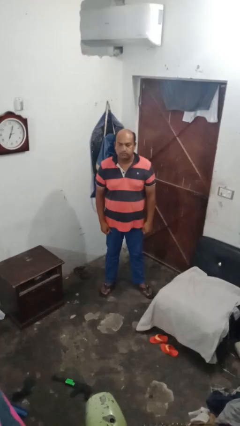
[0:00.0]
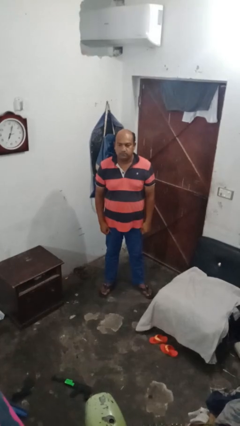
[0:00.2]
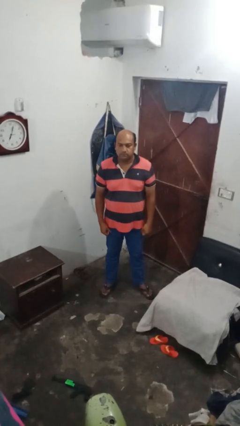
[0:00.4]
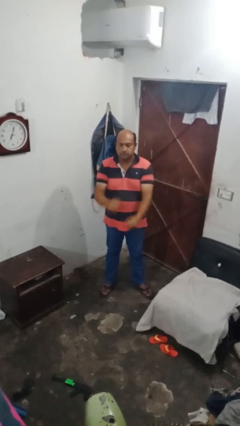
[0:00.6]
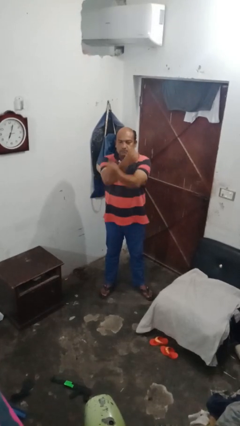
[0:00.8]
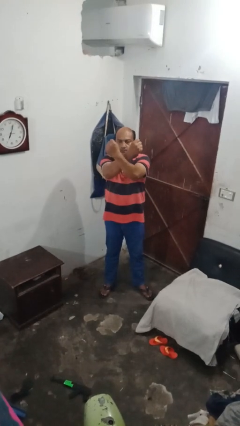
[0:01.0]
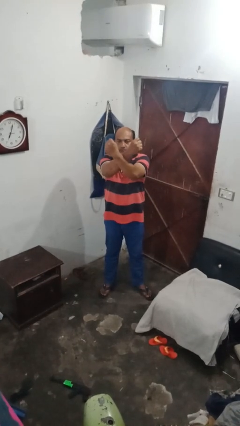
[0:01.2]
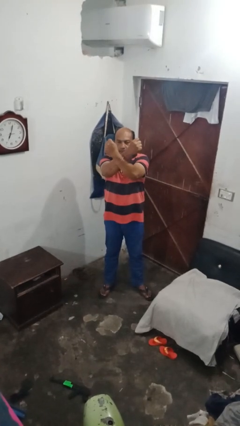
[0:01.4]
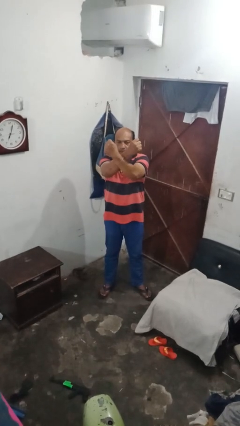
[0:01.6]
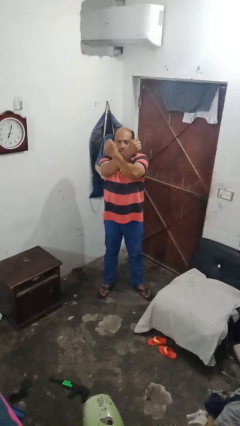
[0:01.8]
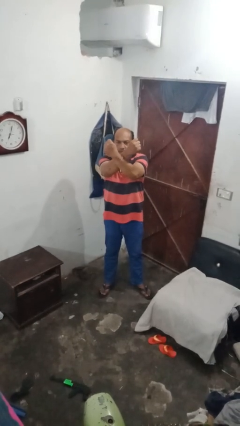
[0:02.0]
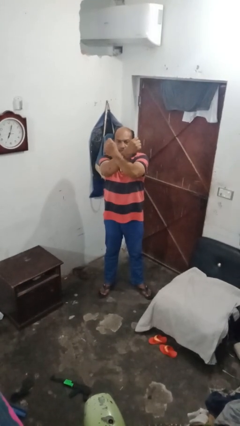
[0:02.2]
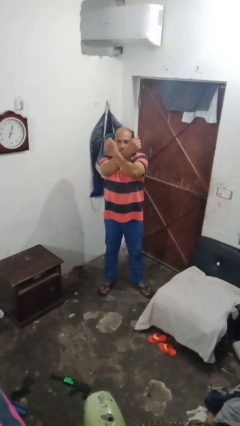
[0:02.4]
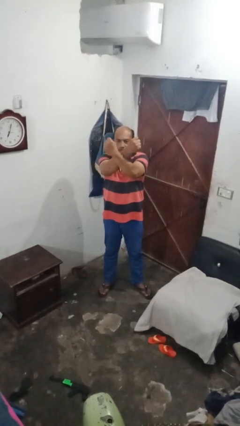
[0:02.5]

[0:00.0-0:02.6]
person gestures arms x

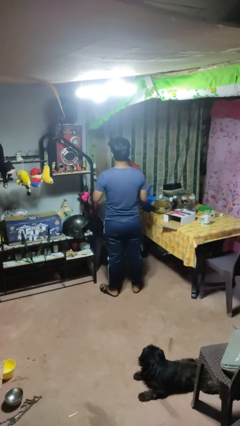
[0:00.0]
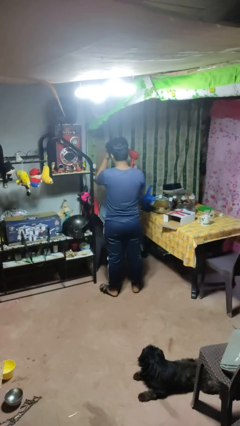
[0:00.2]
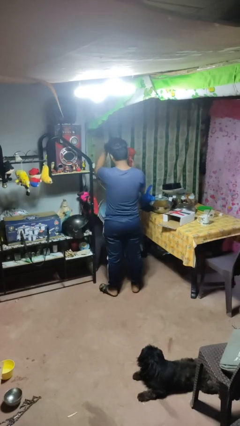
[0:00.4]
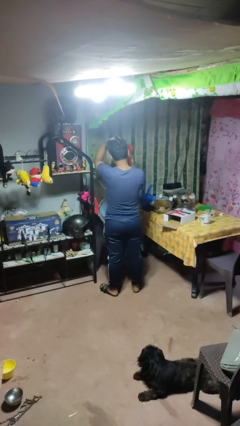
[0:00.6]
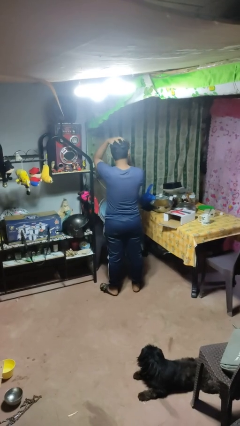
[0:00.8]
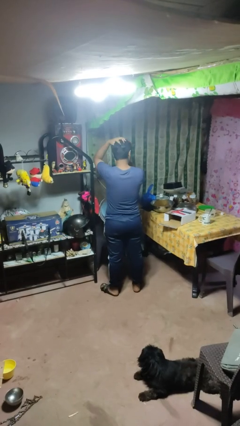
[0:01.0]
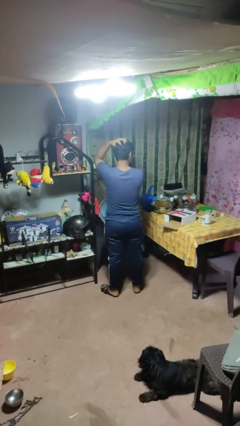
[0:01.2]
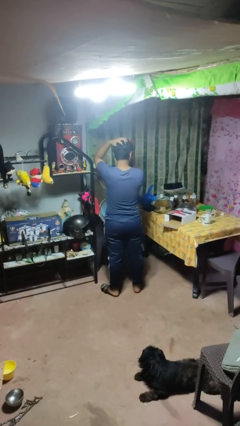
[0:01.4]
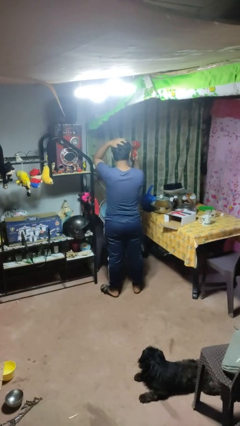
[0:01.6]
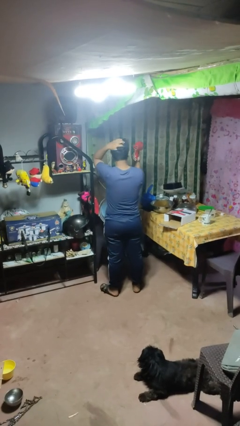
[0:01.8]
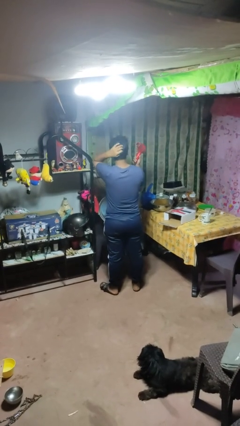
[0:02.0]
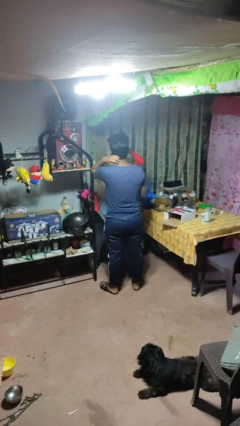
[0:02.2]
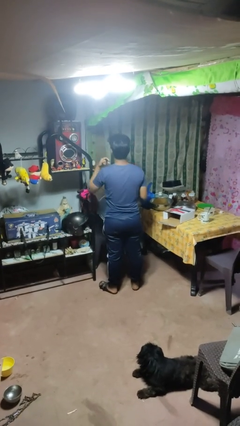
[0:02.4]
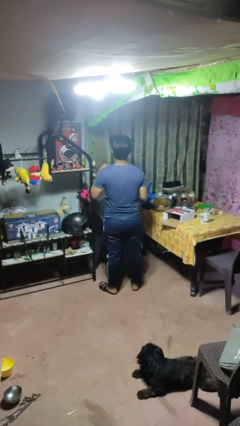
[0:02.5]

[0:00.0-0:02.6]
person dries hair with hairdryer

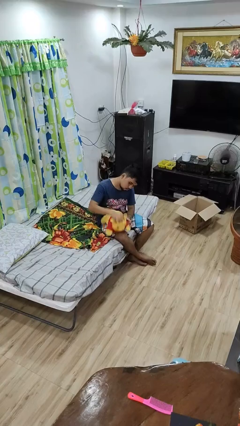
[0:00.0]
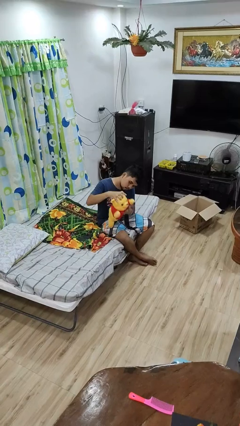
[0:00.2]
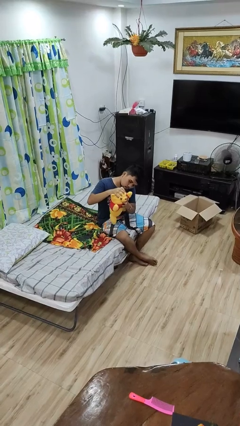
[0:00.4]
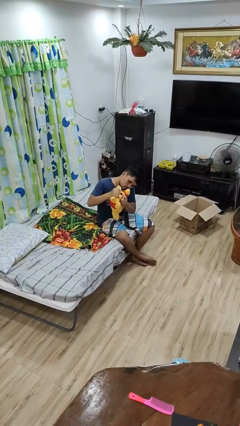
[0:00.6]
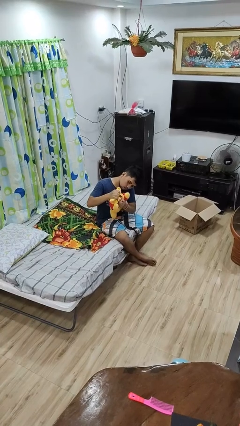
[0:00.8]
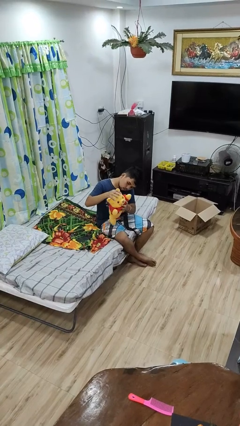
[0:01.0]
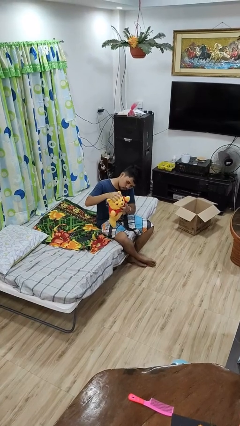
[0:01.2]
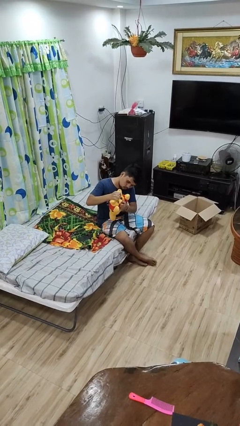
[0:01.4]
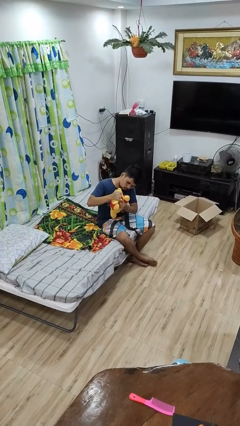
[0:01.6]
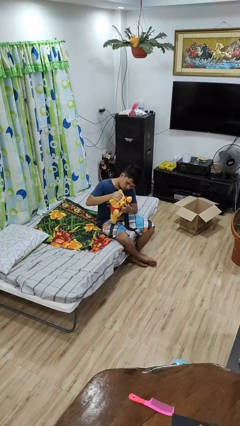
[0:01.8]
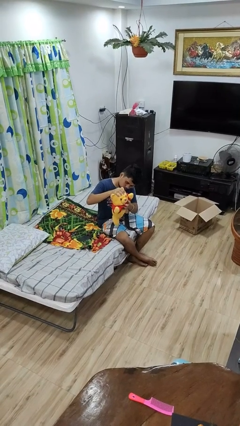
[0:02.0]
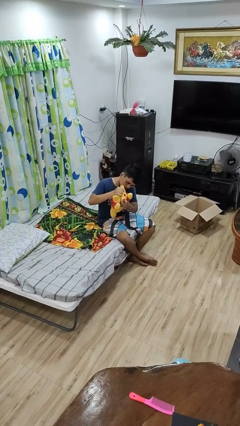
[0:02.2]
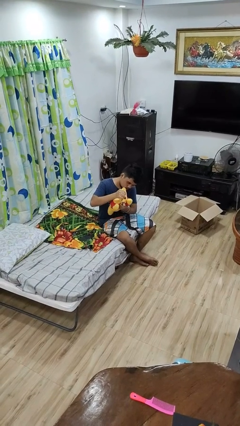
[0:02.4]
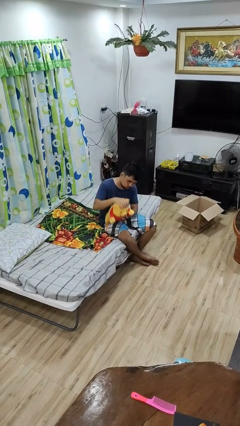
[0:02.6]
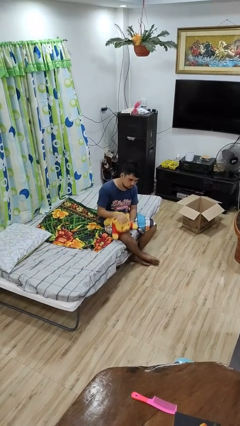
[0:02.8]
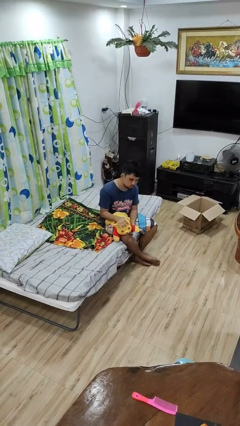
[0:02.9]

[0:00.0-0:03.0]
person squeezes object

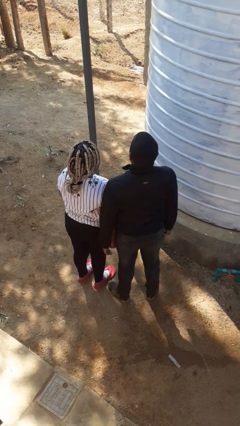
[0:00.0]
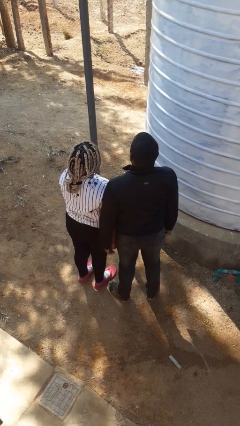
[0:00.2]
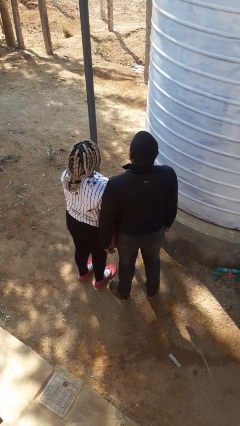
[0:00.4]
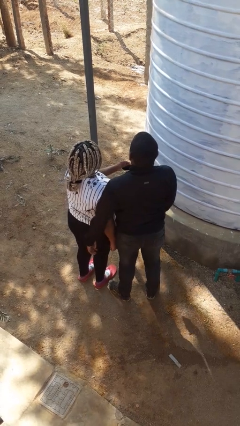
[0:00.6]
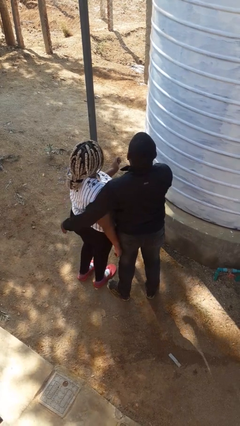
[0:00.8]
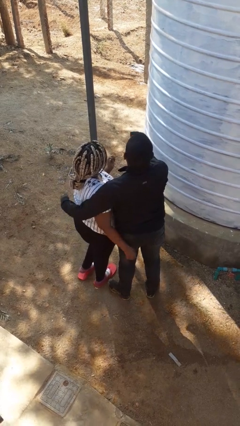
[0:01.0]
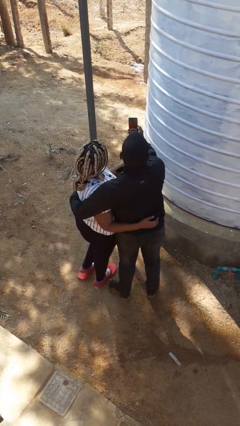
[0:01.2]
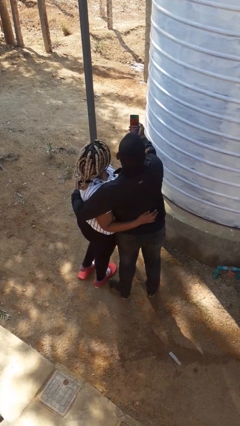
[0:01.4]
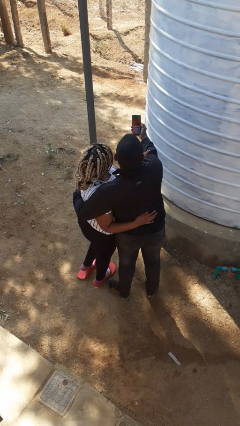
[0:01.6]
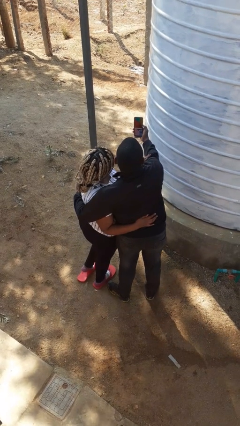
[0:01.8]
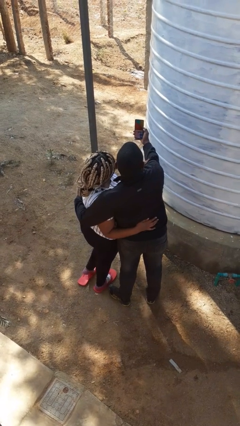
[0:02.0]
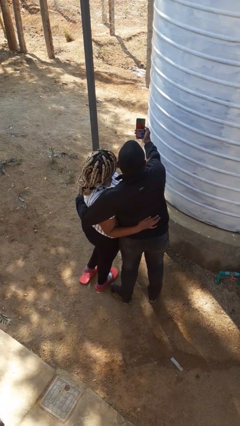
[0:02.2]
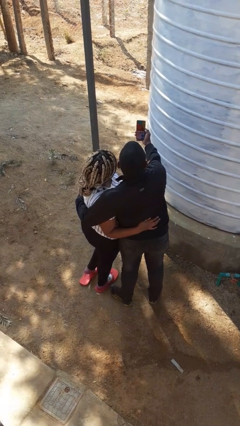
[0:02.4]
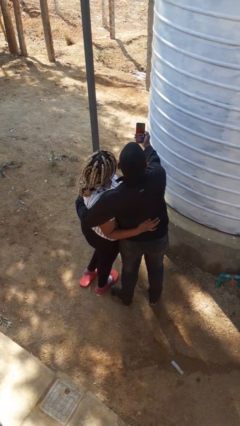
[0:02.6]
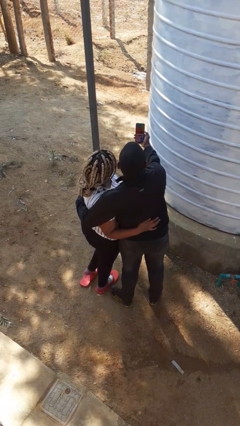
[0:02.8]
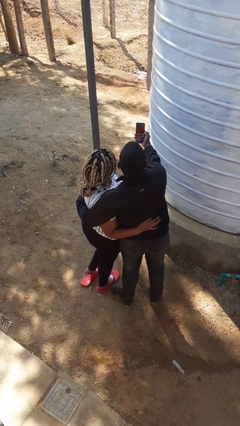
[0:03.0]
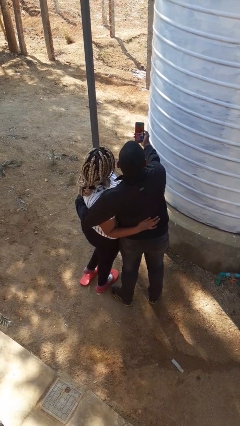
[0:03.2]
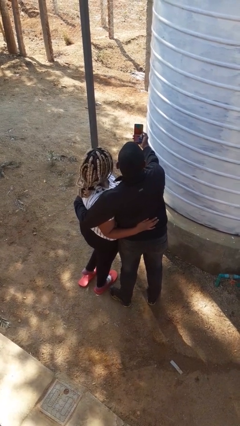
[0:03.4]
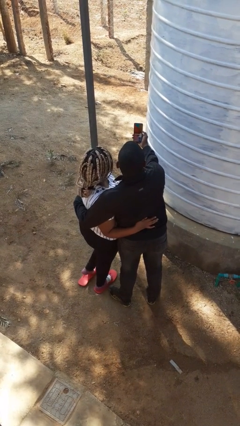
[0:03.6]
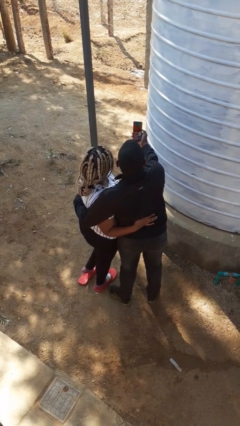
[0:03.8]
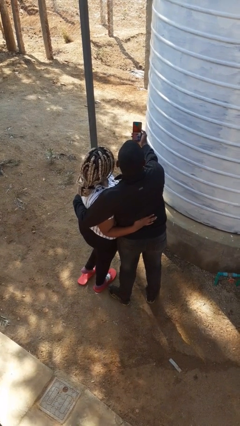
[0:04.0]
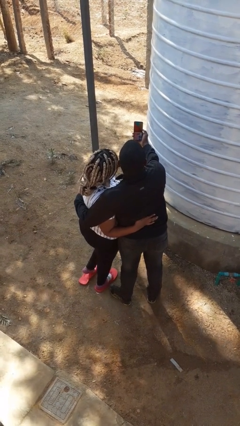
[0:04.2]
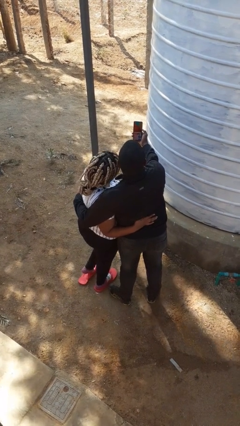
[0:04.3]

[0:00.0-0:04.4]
person takes selfie with person

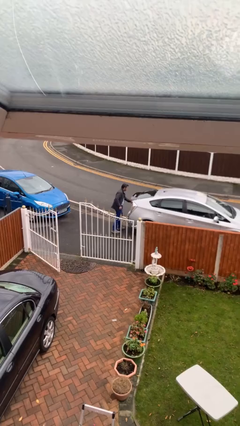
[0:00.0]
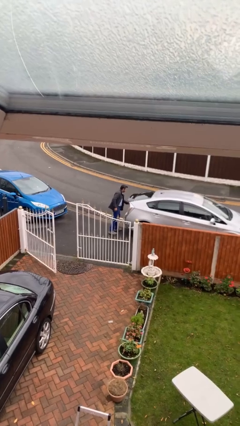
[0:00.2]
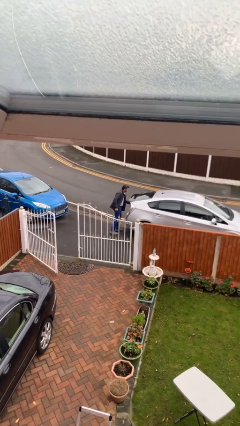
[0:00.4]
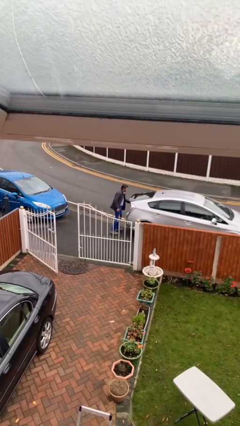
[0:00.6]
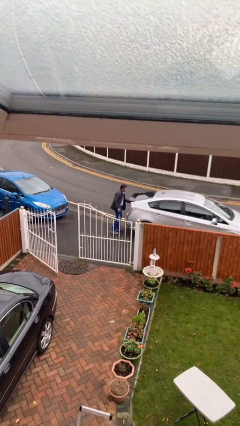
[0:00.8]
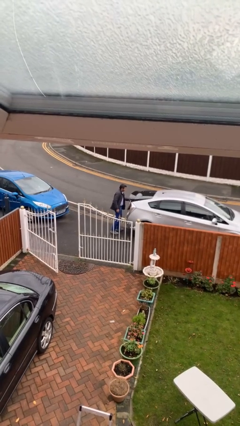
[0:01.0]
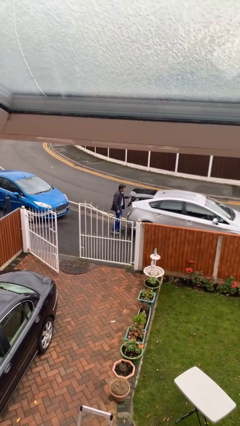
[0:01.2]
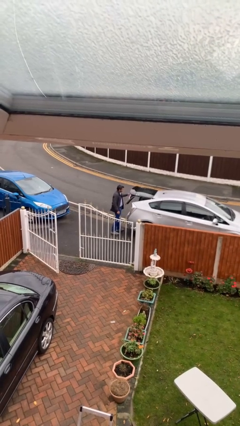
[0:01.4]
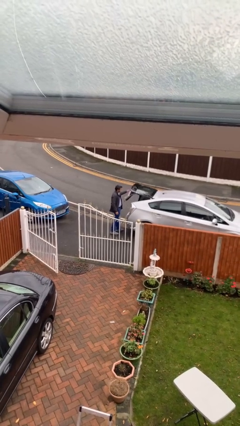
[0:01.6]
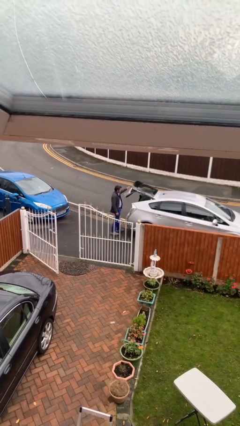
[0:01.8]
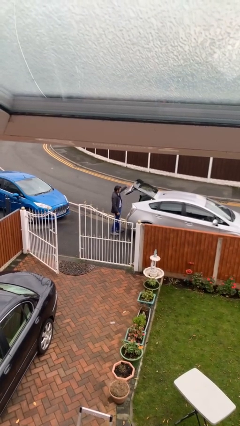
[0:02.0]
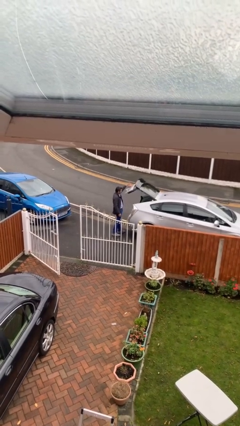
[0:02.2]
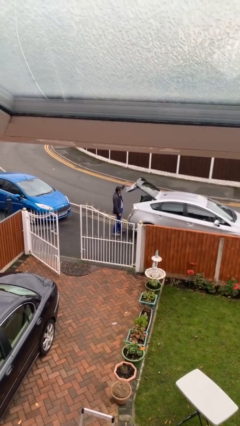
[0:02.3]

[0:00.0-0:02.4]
person opens car trunk

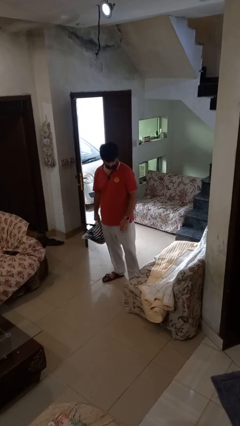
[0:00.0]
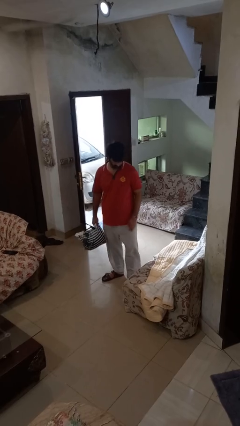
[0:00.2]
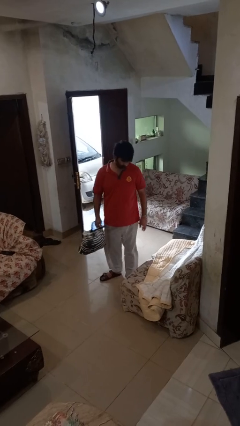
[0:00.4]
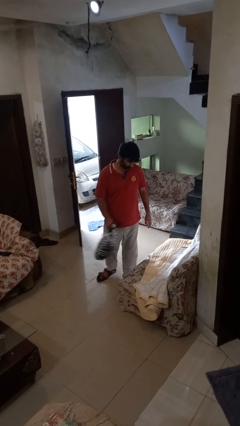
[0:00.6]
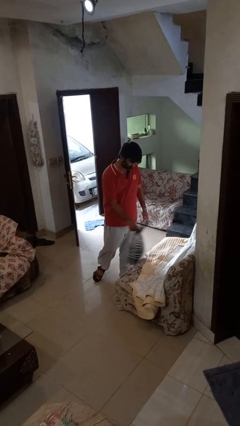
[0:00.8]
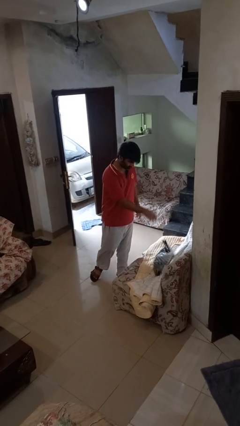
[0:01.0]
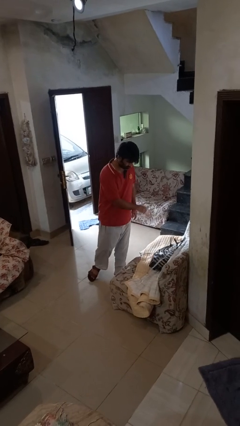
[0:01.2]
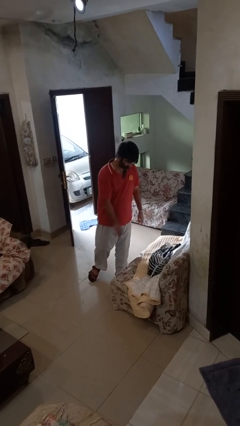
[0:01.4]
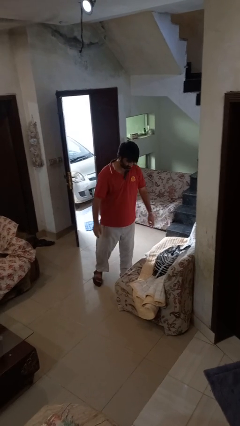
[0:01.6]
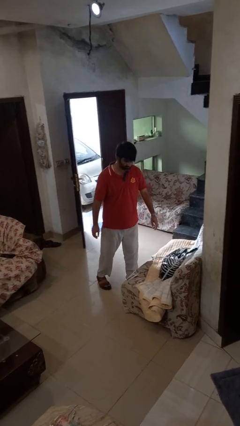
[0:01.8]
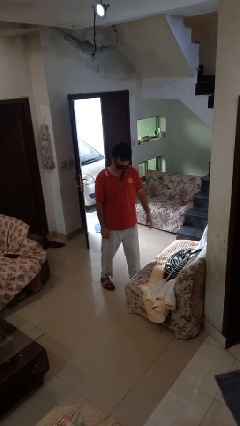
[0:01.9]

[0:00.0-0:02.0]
person puts down object on couch

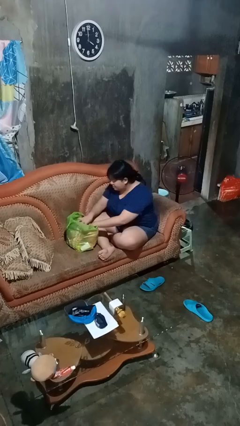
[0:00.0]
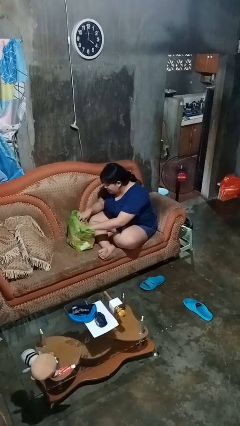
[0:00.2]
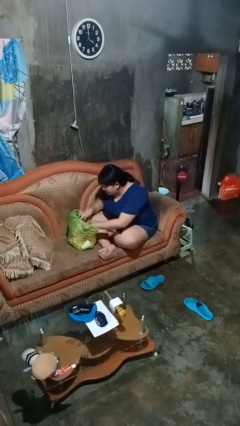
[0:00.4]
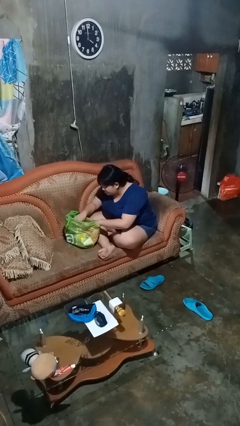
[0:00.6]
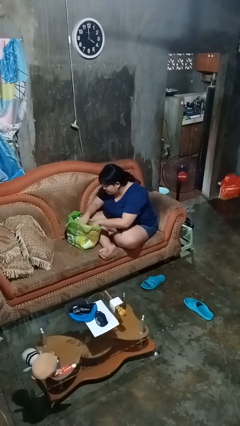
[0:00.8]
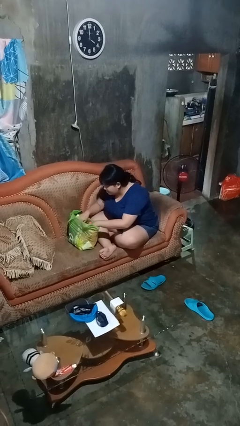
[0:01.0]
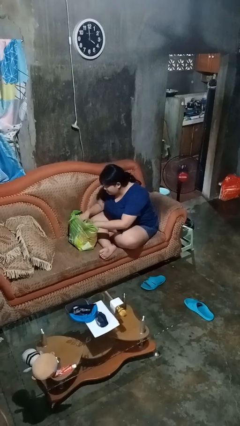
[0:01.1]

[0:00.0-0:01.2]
person searches in bag
